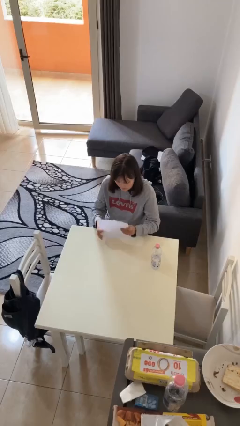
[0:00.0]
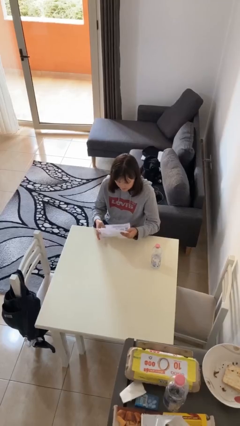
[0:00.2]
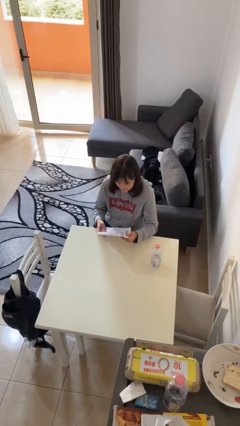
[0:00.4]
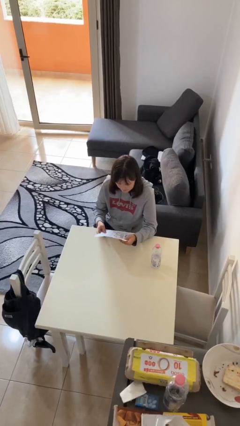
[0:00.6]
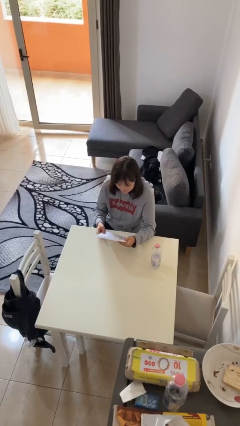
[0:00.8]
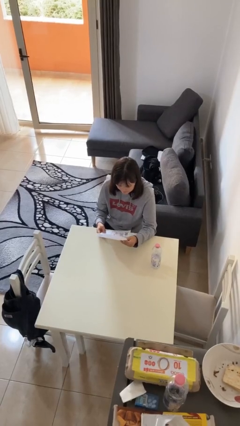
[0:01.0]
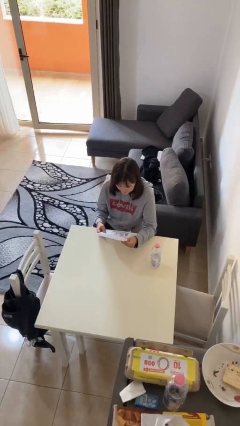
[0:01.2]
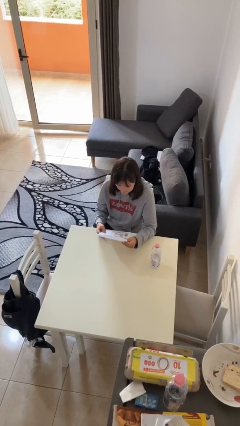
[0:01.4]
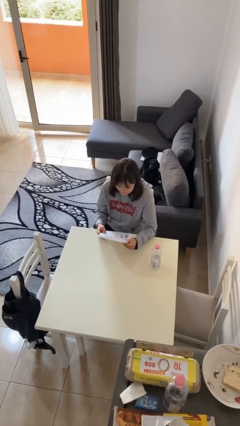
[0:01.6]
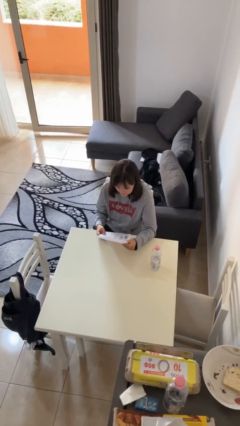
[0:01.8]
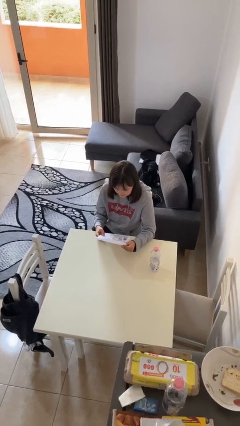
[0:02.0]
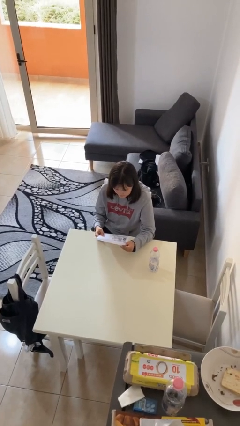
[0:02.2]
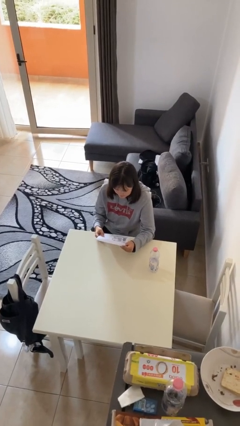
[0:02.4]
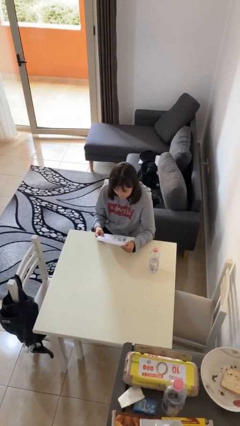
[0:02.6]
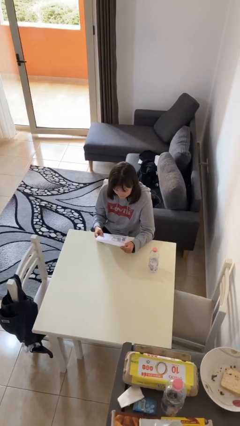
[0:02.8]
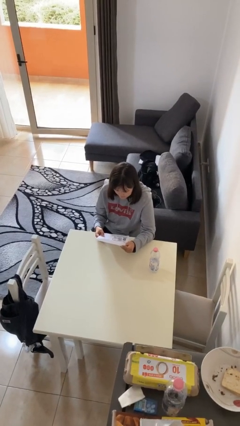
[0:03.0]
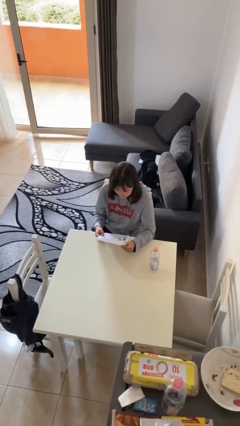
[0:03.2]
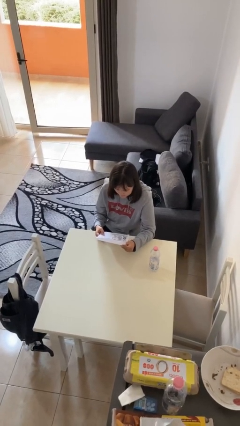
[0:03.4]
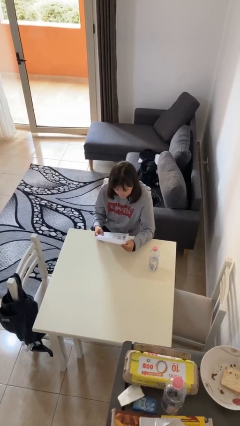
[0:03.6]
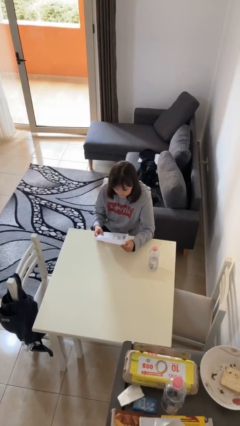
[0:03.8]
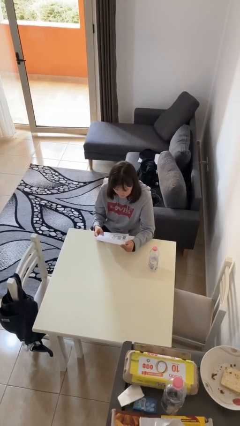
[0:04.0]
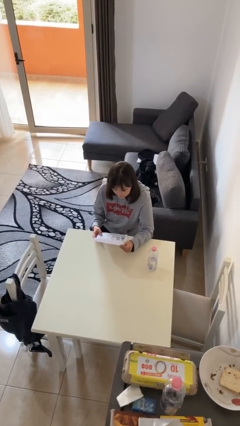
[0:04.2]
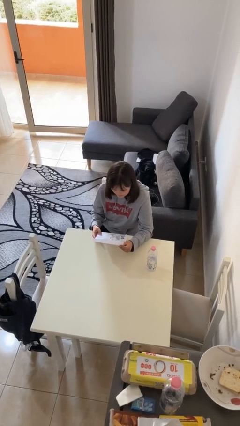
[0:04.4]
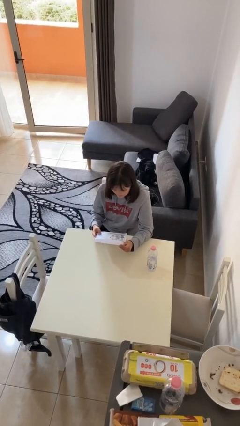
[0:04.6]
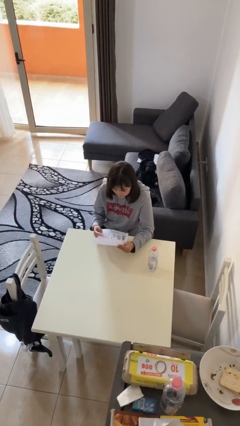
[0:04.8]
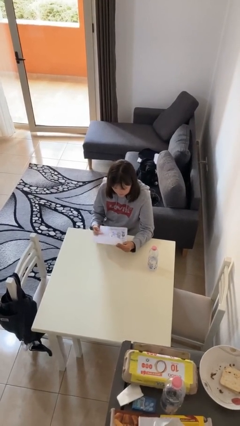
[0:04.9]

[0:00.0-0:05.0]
person reads document

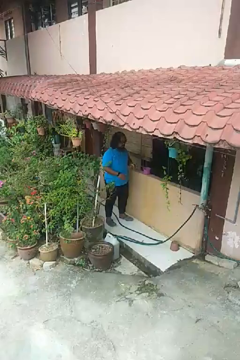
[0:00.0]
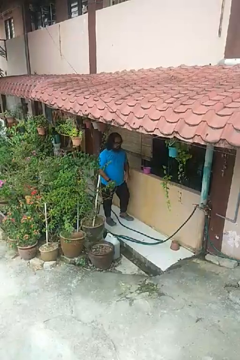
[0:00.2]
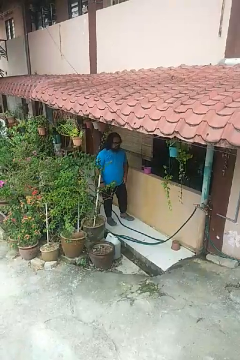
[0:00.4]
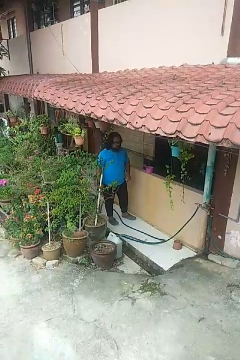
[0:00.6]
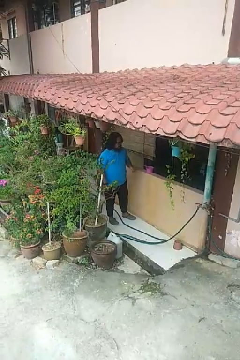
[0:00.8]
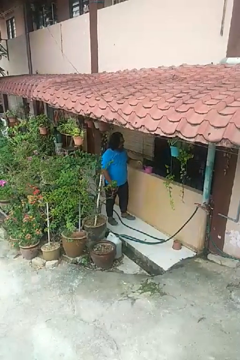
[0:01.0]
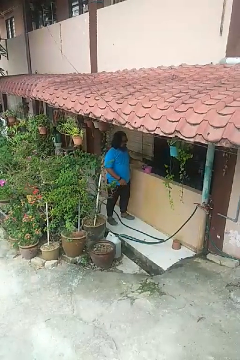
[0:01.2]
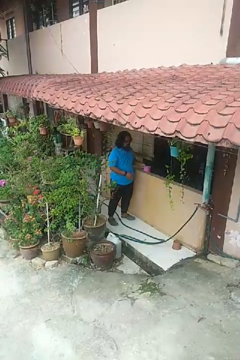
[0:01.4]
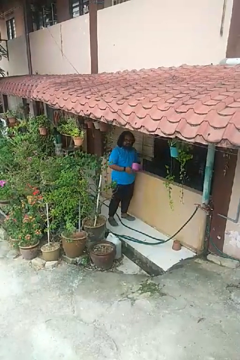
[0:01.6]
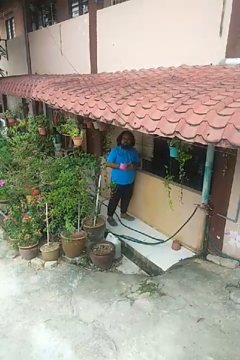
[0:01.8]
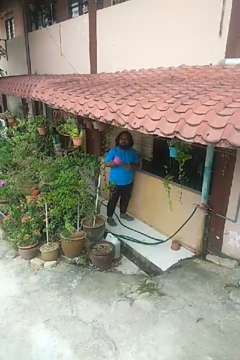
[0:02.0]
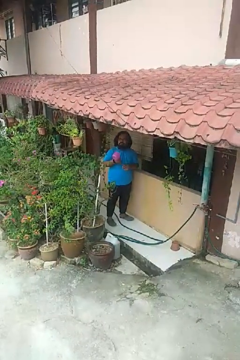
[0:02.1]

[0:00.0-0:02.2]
person picks up object from countertop

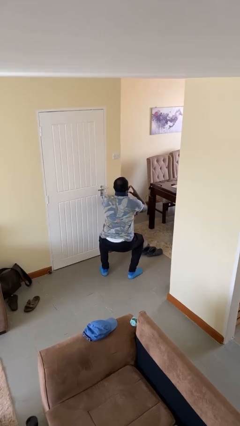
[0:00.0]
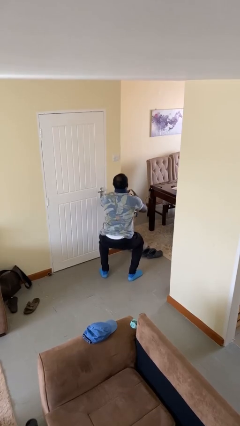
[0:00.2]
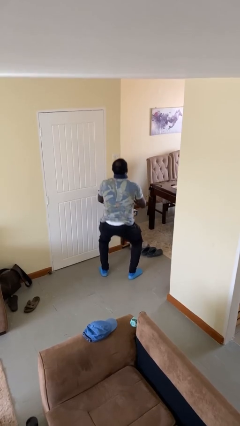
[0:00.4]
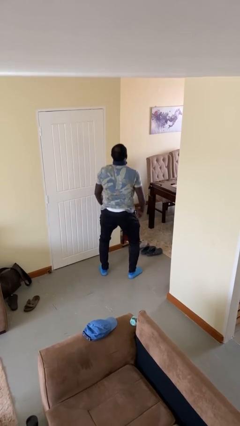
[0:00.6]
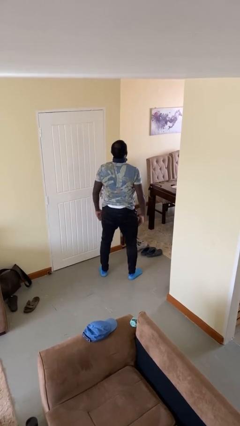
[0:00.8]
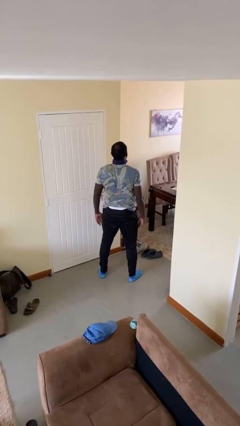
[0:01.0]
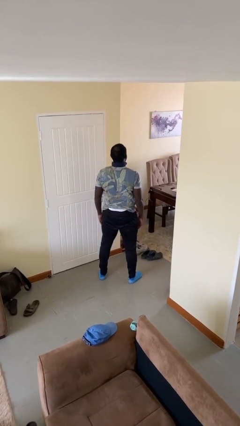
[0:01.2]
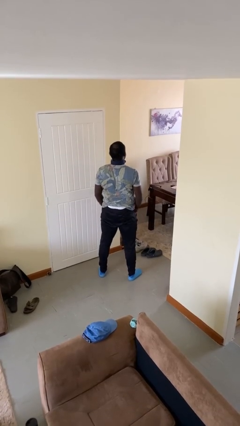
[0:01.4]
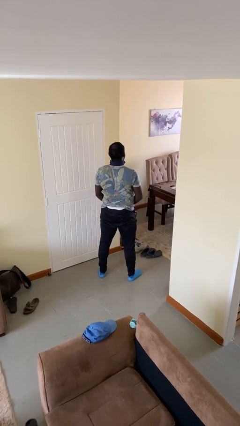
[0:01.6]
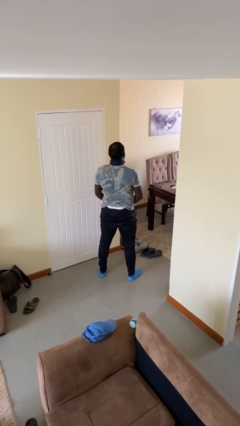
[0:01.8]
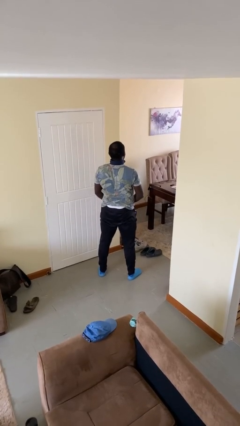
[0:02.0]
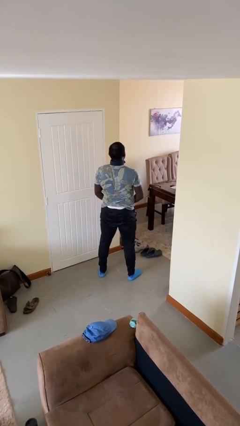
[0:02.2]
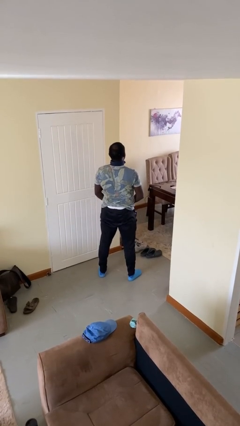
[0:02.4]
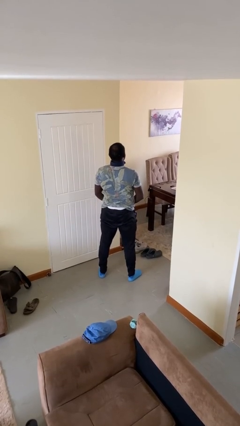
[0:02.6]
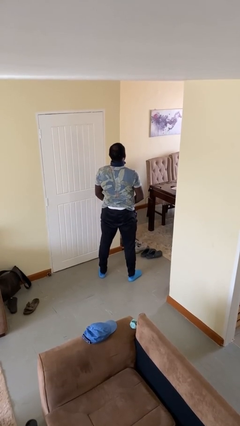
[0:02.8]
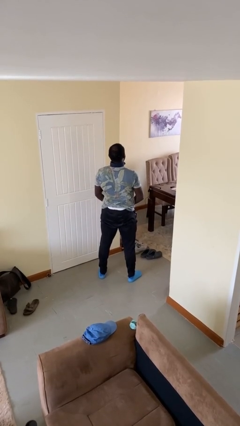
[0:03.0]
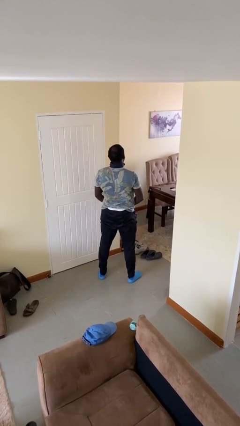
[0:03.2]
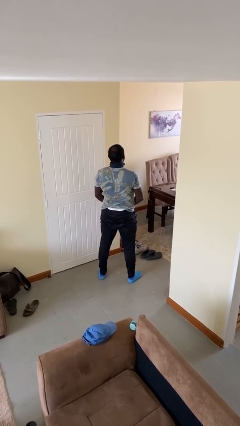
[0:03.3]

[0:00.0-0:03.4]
person stands up

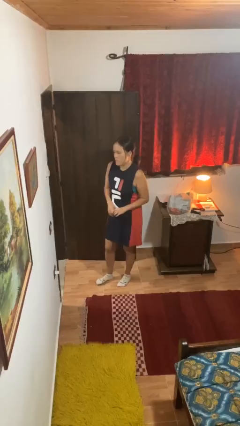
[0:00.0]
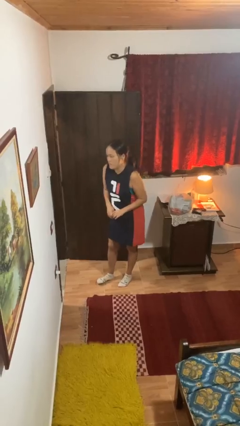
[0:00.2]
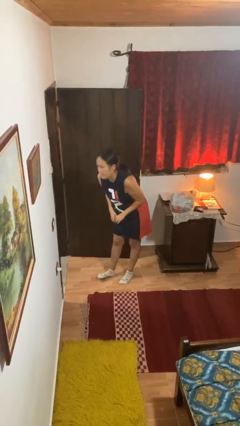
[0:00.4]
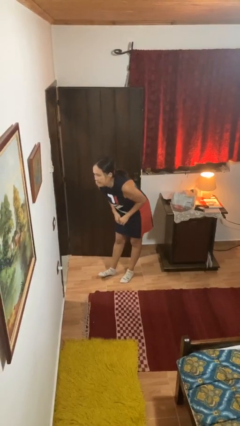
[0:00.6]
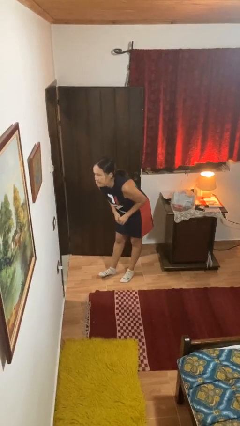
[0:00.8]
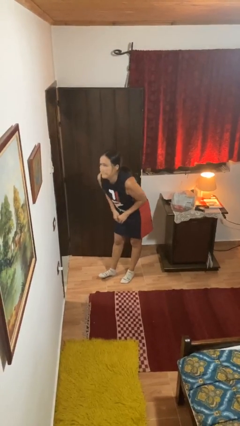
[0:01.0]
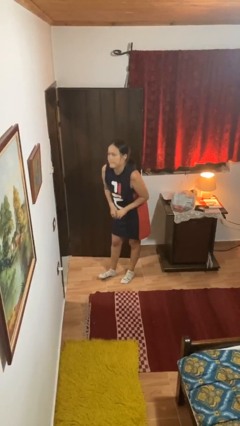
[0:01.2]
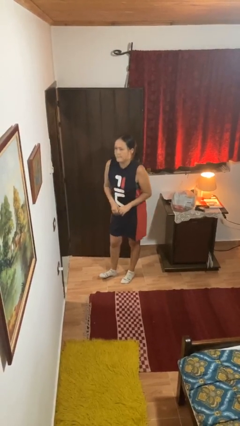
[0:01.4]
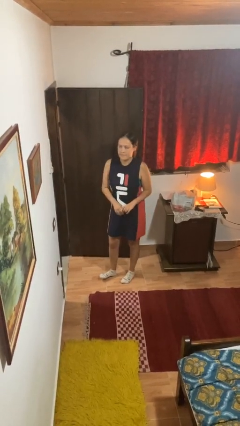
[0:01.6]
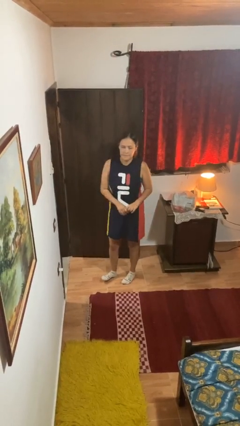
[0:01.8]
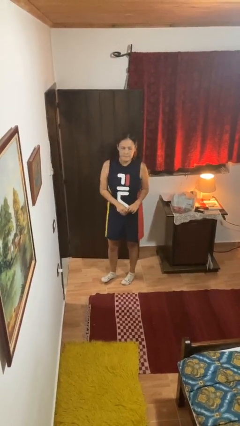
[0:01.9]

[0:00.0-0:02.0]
person bows

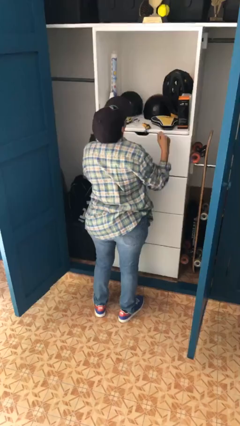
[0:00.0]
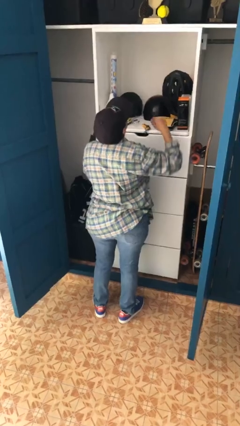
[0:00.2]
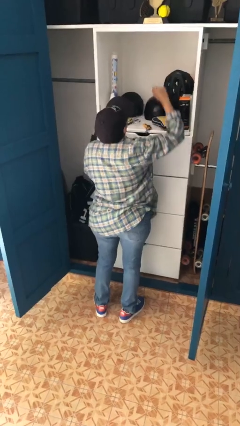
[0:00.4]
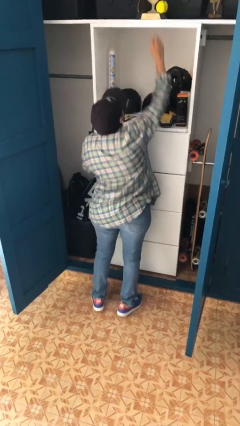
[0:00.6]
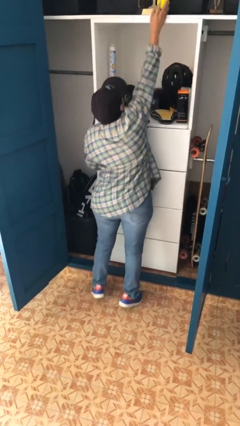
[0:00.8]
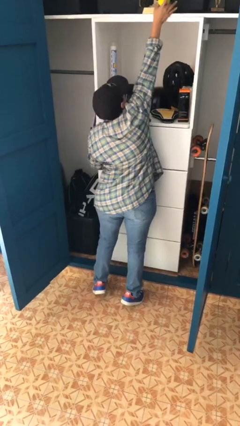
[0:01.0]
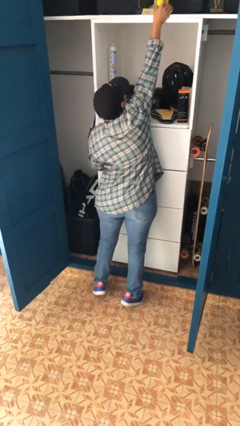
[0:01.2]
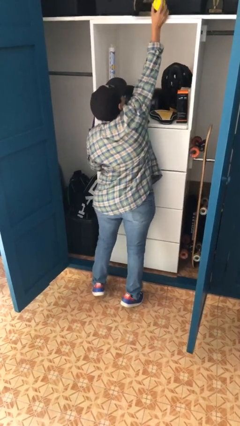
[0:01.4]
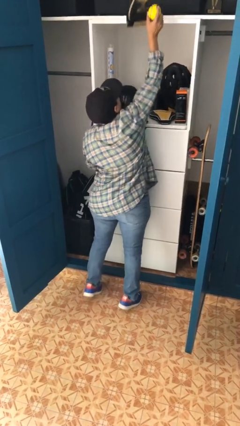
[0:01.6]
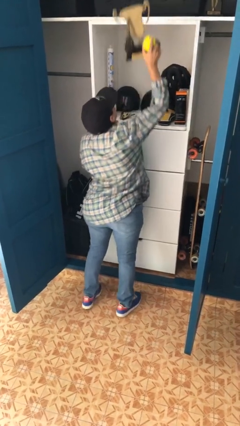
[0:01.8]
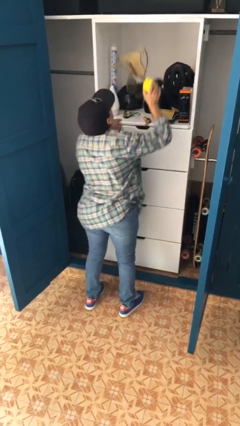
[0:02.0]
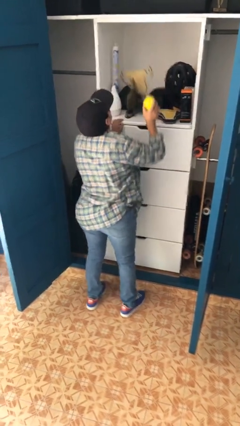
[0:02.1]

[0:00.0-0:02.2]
person picks up object from shelf

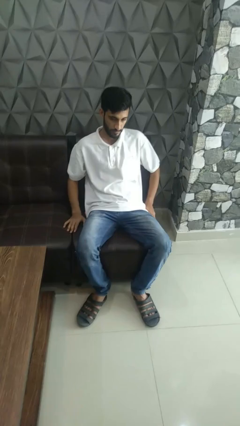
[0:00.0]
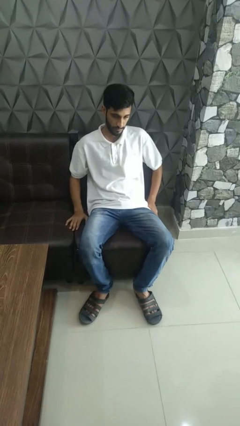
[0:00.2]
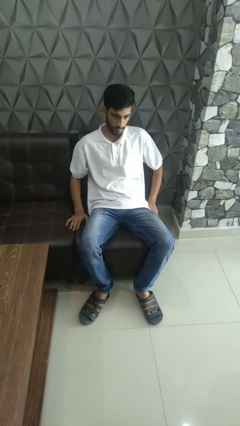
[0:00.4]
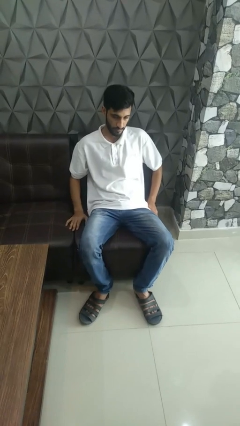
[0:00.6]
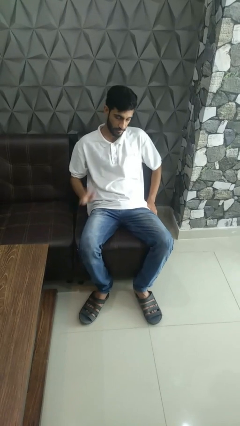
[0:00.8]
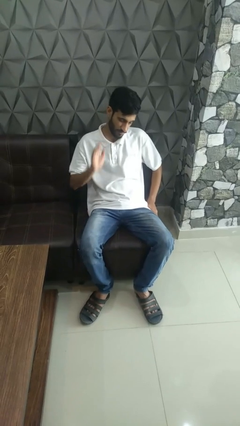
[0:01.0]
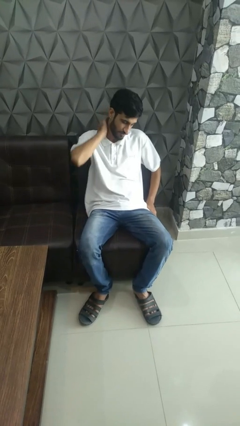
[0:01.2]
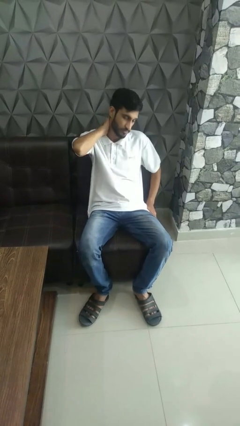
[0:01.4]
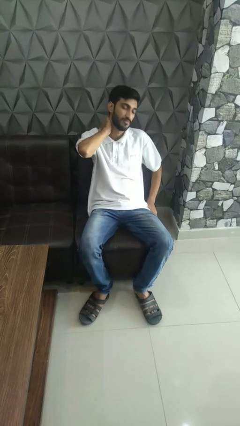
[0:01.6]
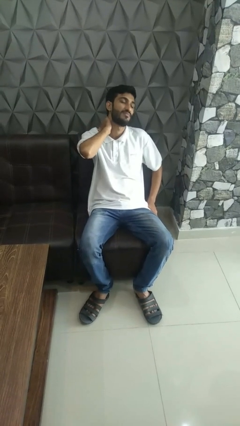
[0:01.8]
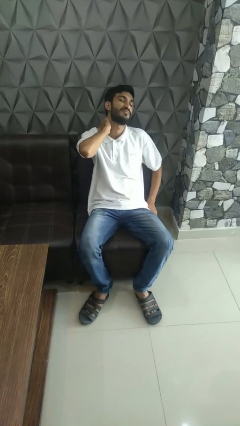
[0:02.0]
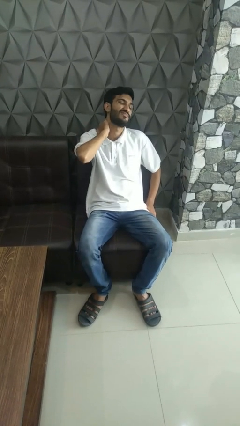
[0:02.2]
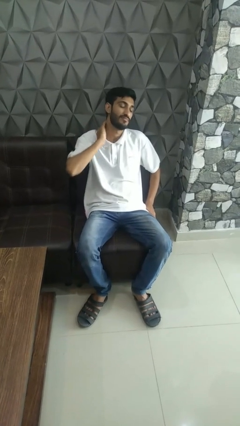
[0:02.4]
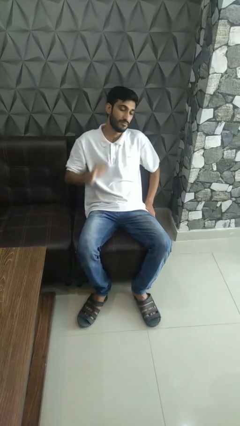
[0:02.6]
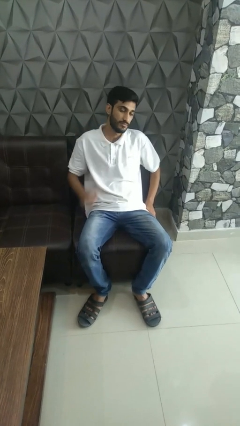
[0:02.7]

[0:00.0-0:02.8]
person rubs neck

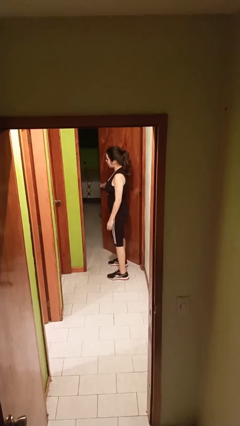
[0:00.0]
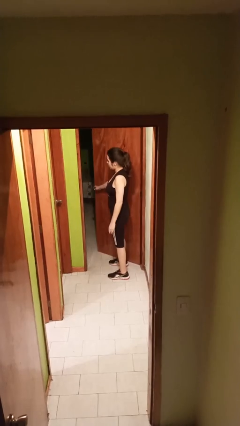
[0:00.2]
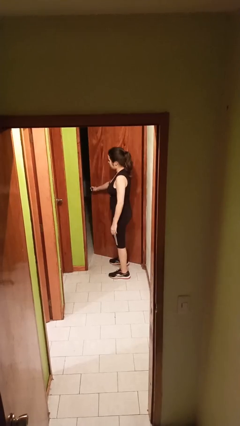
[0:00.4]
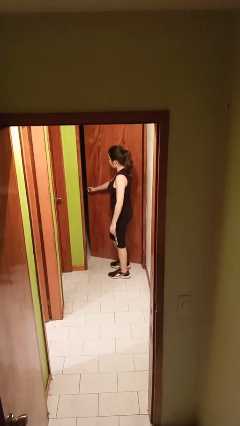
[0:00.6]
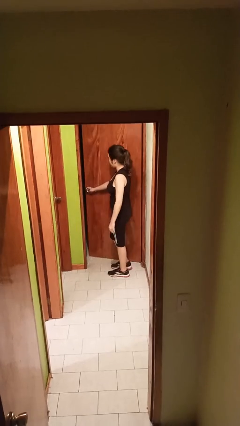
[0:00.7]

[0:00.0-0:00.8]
person closes facility door
